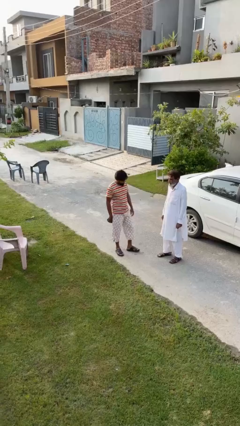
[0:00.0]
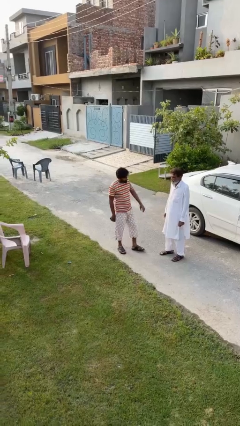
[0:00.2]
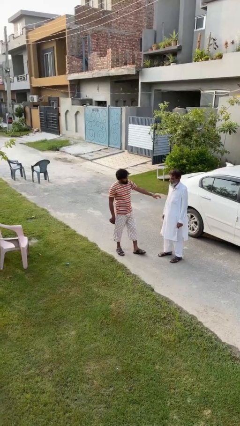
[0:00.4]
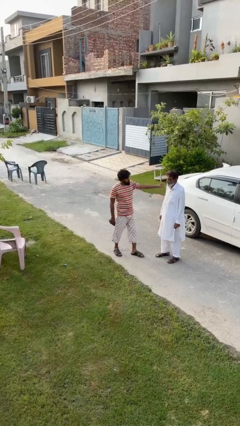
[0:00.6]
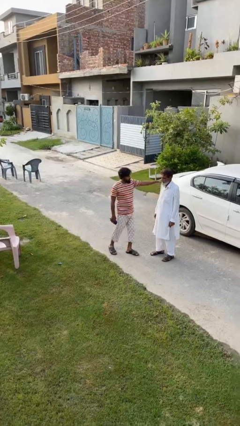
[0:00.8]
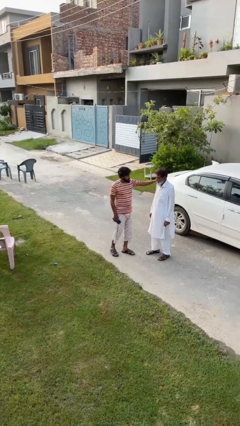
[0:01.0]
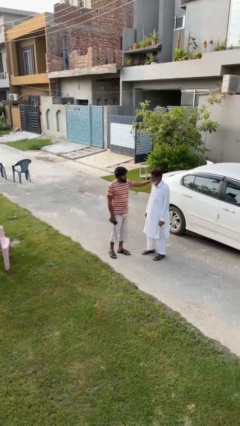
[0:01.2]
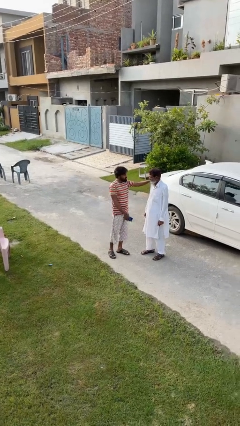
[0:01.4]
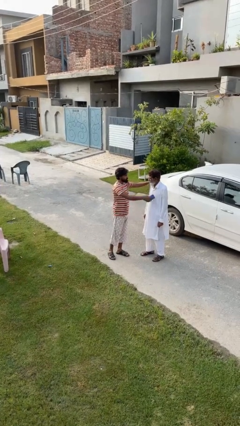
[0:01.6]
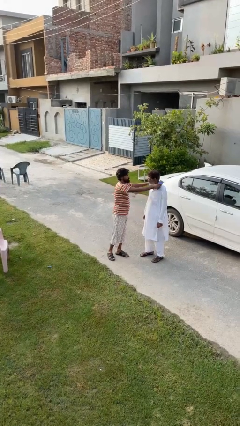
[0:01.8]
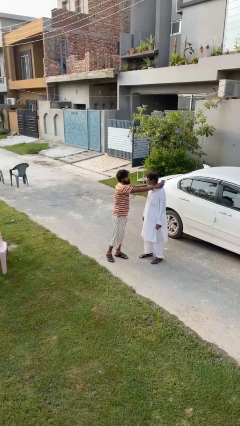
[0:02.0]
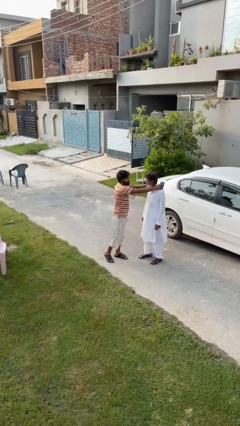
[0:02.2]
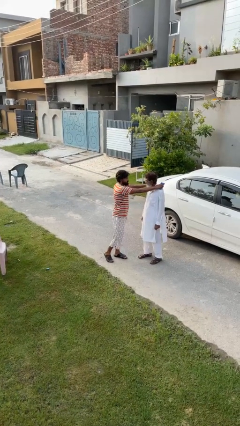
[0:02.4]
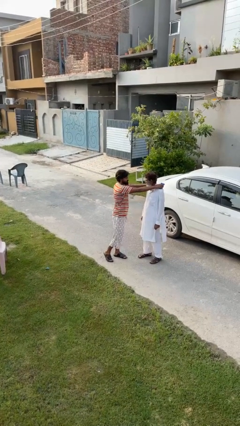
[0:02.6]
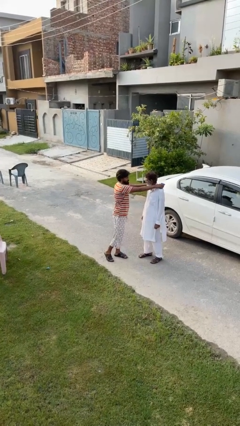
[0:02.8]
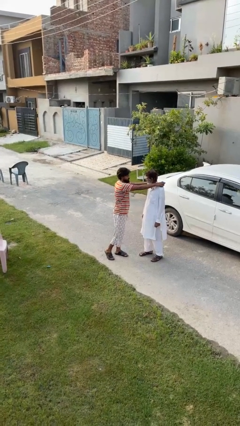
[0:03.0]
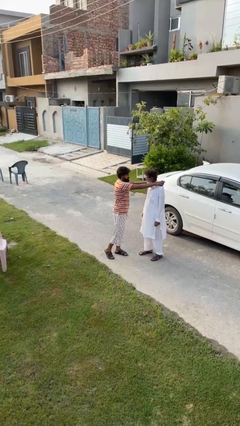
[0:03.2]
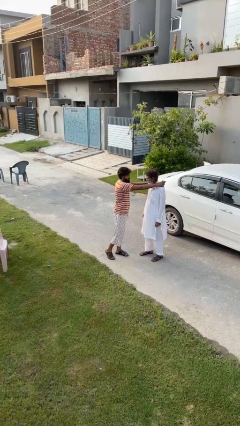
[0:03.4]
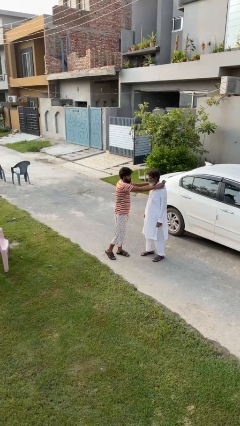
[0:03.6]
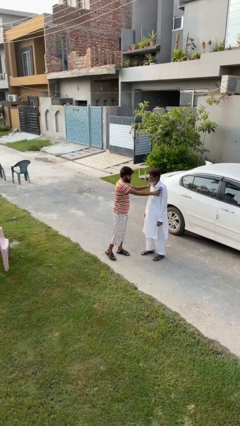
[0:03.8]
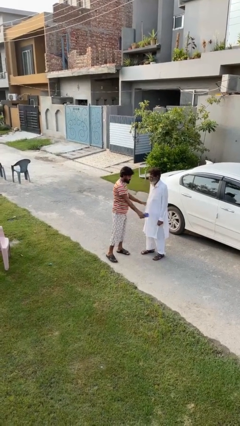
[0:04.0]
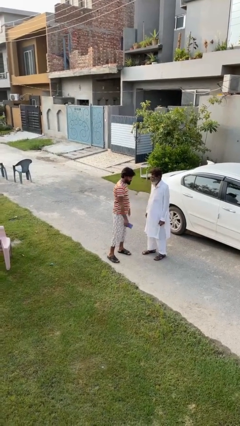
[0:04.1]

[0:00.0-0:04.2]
person pounds shoulders of person

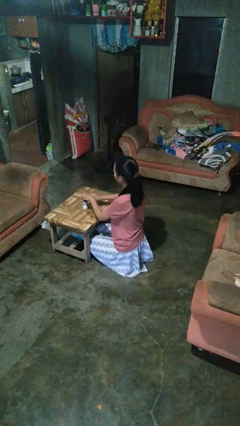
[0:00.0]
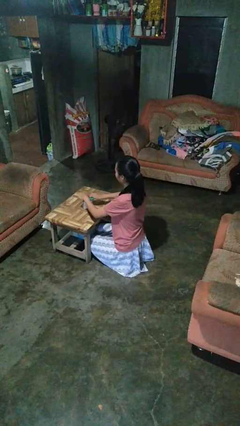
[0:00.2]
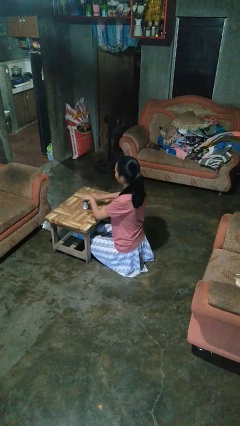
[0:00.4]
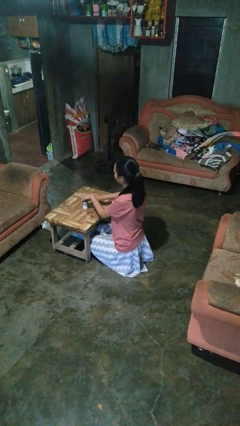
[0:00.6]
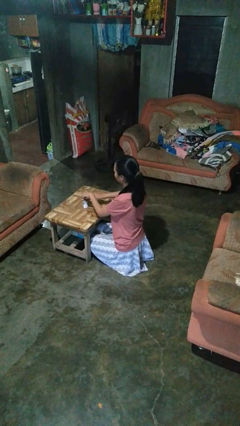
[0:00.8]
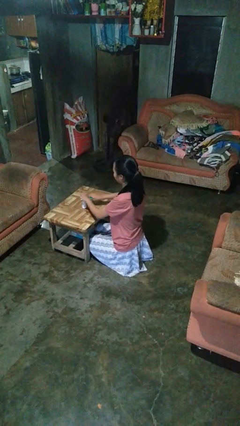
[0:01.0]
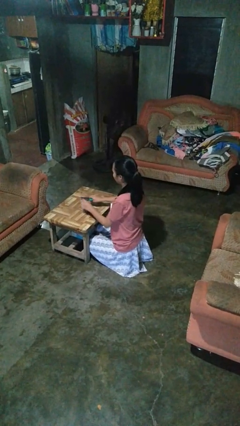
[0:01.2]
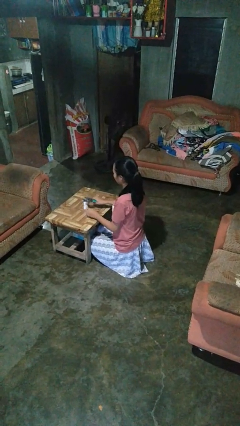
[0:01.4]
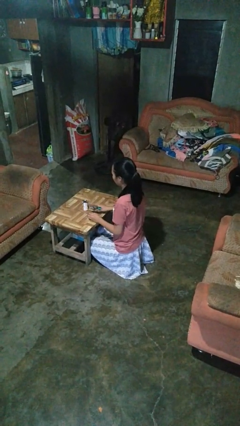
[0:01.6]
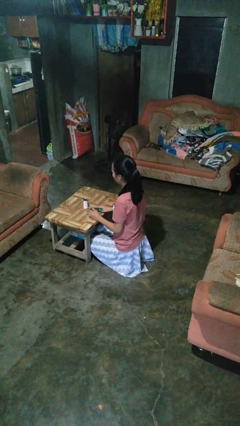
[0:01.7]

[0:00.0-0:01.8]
person opens can with can opener

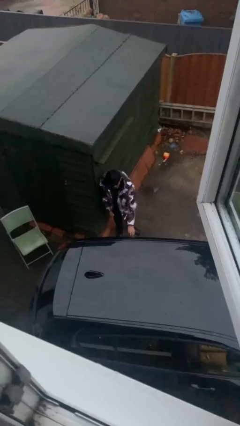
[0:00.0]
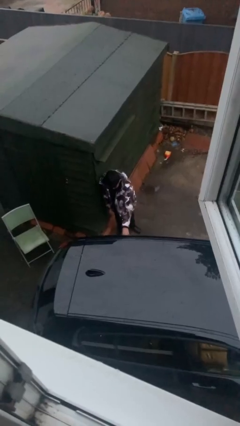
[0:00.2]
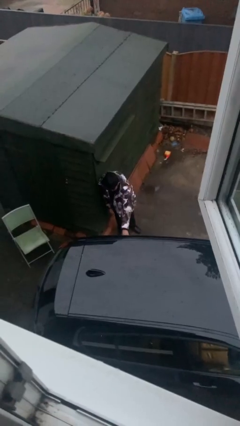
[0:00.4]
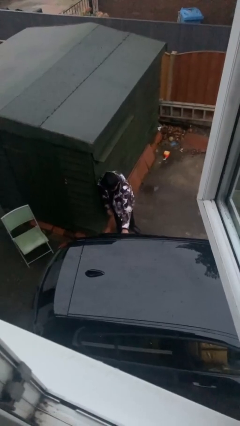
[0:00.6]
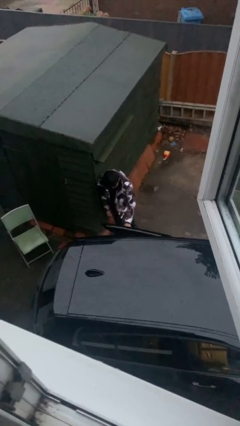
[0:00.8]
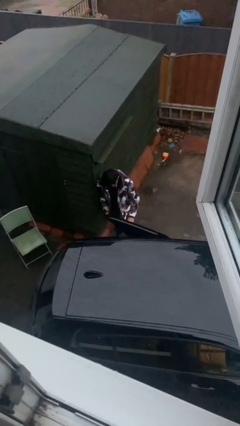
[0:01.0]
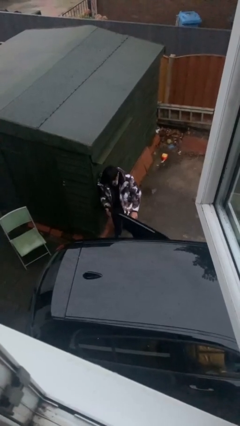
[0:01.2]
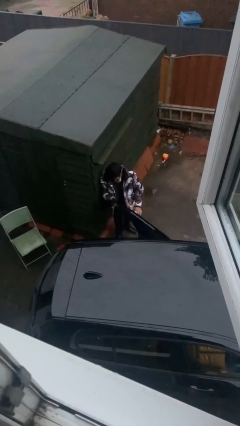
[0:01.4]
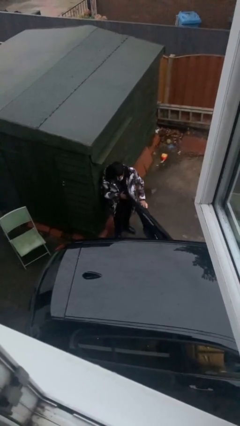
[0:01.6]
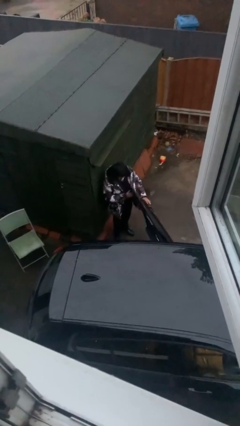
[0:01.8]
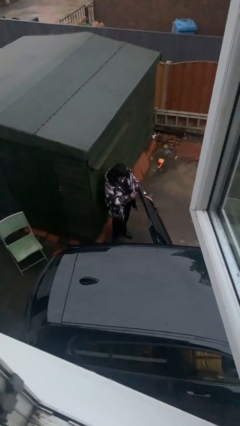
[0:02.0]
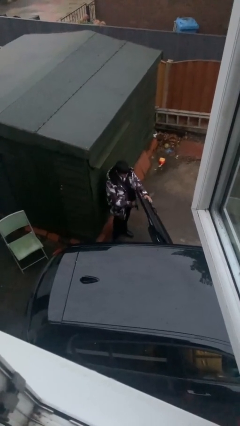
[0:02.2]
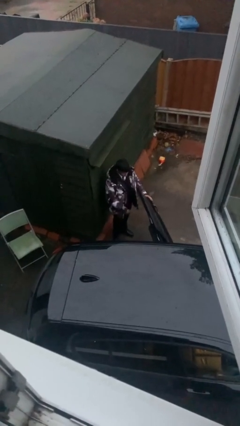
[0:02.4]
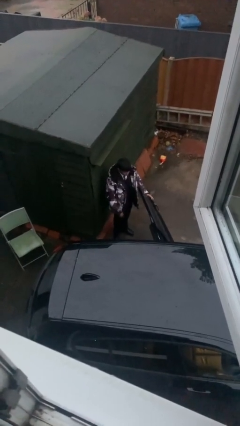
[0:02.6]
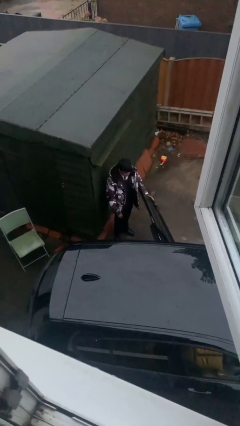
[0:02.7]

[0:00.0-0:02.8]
person opens car door

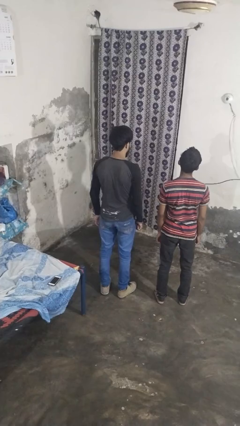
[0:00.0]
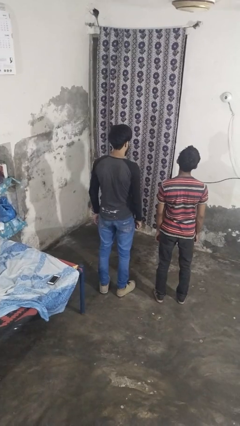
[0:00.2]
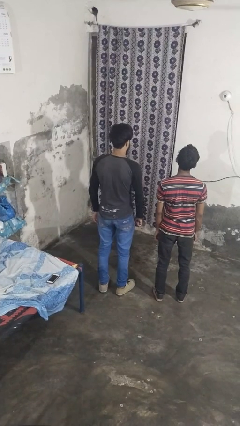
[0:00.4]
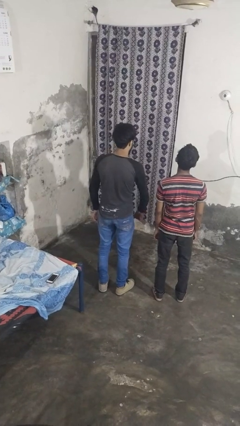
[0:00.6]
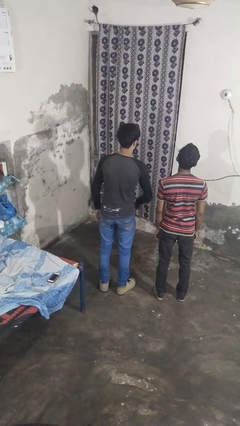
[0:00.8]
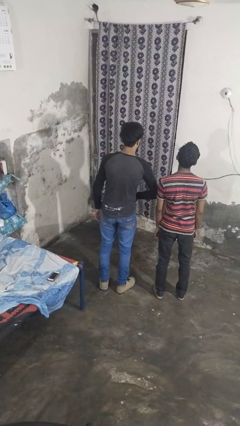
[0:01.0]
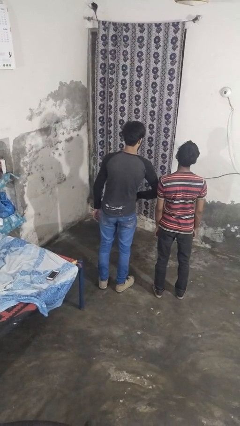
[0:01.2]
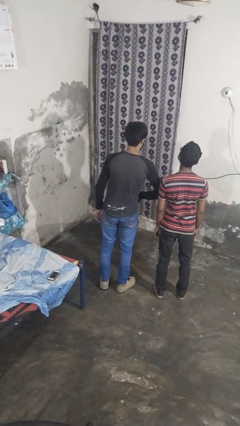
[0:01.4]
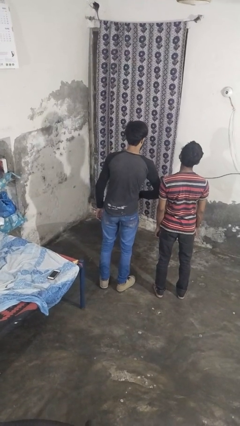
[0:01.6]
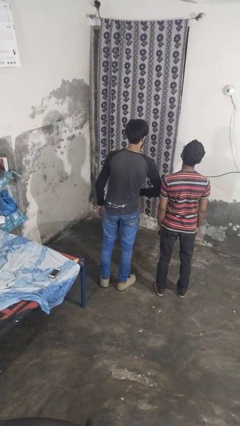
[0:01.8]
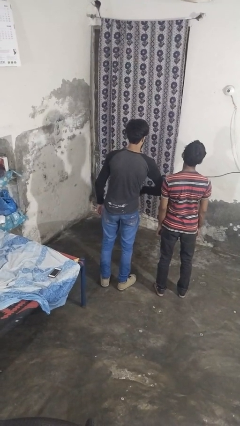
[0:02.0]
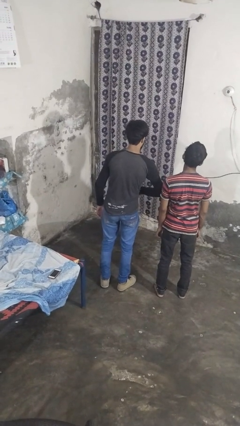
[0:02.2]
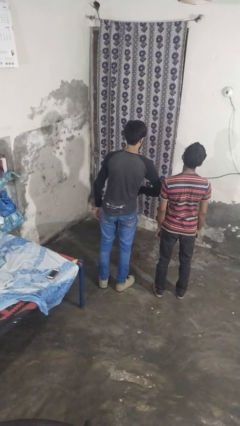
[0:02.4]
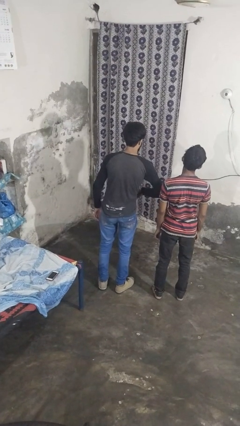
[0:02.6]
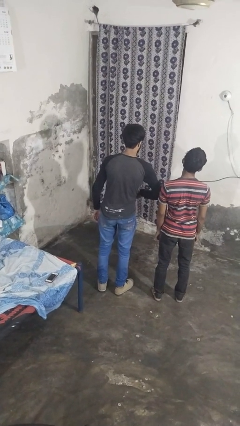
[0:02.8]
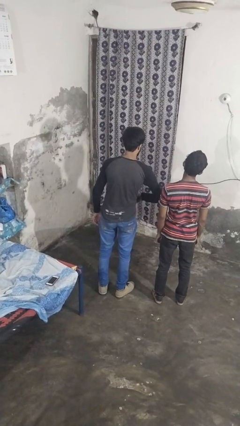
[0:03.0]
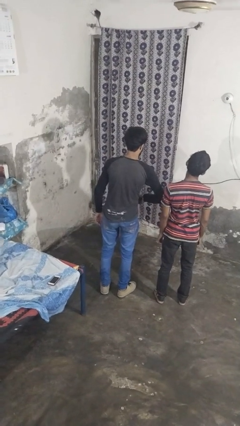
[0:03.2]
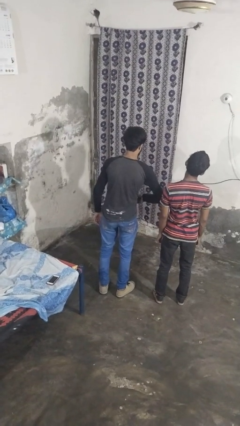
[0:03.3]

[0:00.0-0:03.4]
person nudges person with elbow

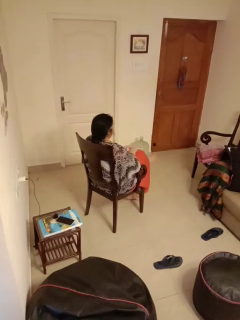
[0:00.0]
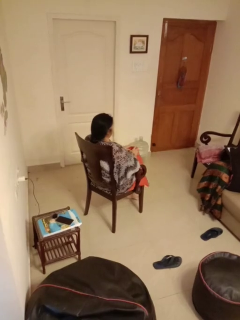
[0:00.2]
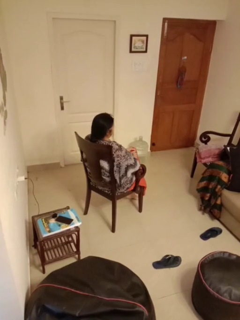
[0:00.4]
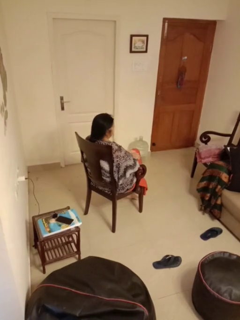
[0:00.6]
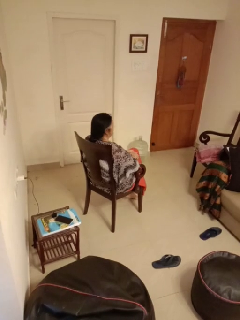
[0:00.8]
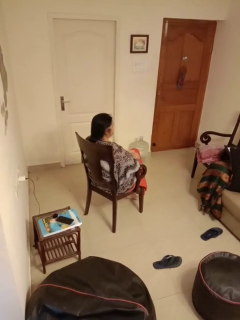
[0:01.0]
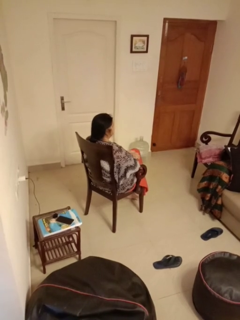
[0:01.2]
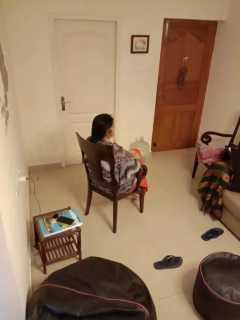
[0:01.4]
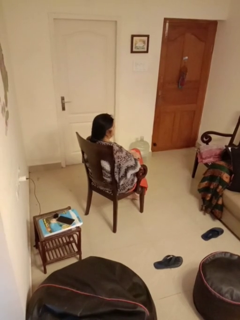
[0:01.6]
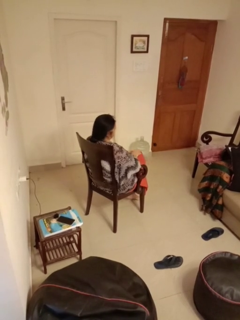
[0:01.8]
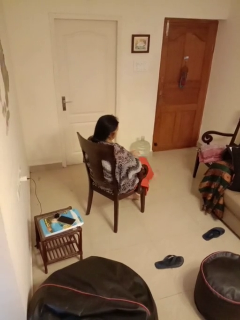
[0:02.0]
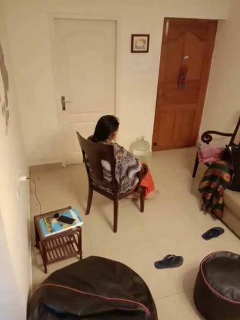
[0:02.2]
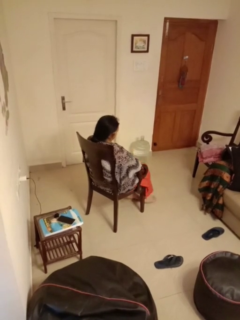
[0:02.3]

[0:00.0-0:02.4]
person crosses legs

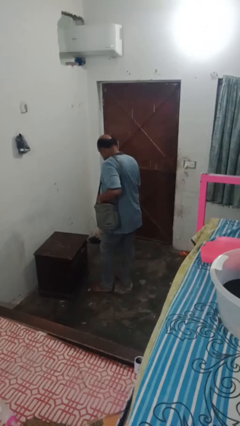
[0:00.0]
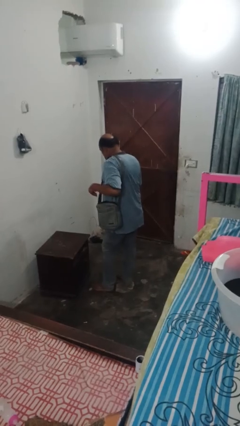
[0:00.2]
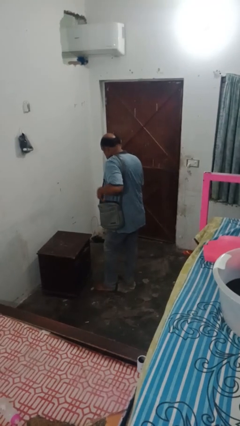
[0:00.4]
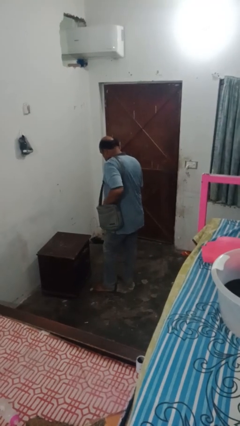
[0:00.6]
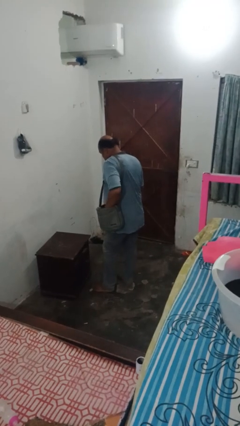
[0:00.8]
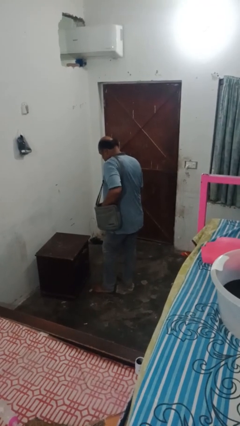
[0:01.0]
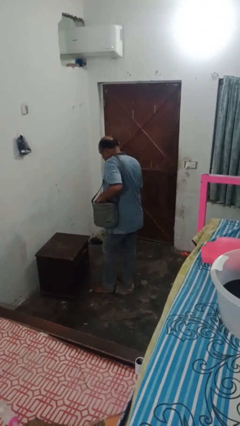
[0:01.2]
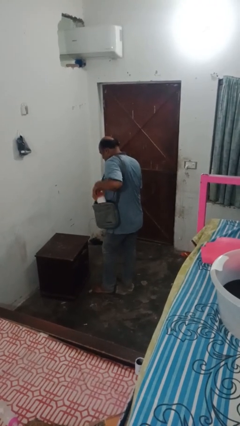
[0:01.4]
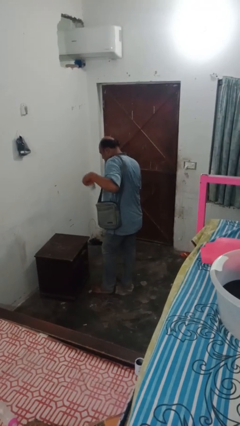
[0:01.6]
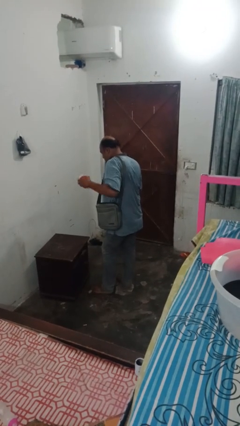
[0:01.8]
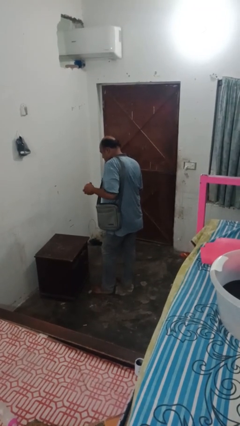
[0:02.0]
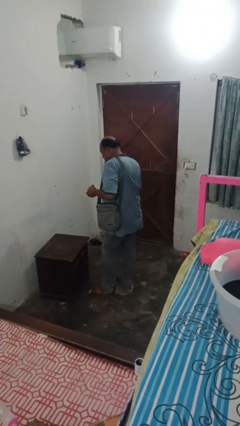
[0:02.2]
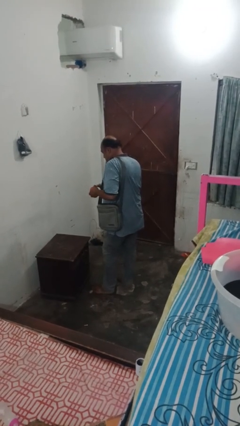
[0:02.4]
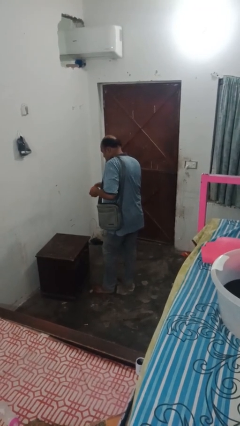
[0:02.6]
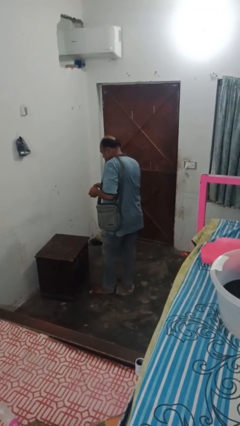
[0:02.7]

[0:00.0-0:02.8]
person takes object from bag

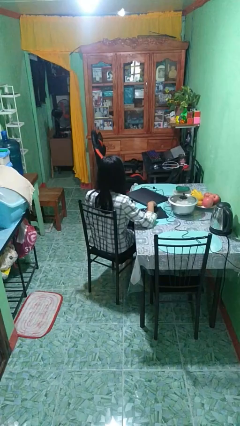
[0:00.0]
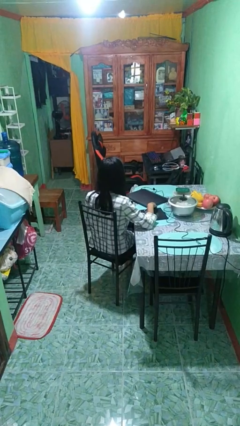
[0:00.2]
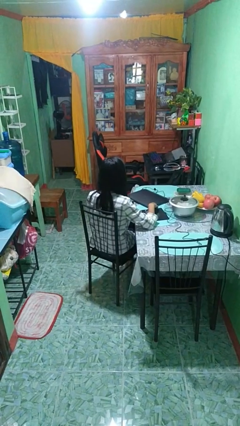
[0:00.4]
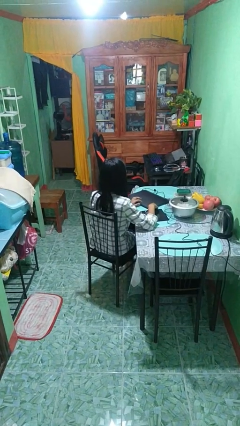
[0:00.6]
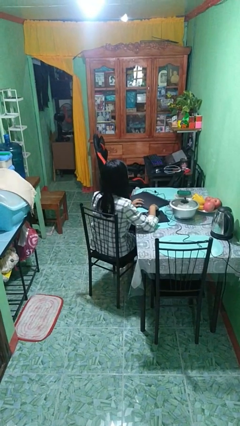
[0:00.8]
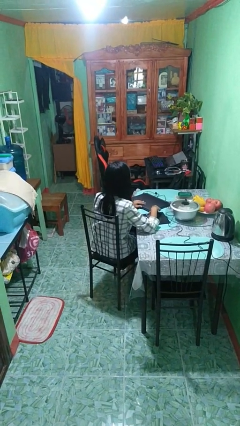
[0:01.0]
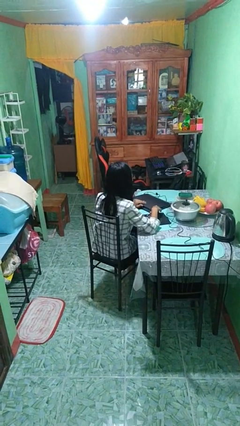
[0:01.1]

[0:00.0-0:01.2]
person opens laptop
